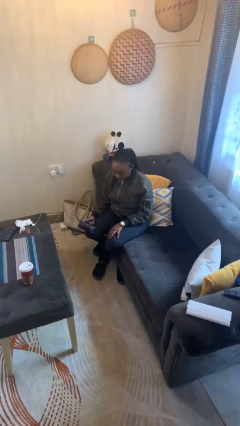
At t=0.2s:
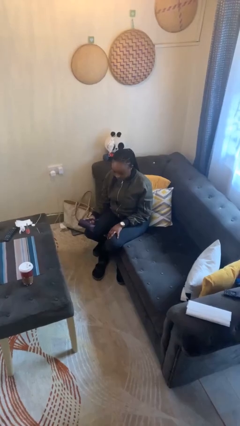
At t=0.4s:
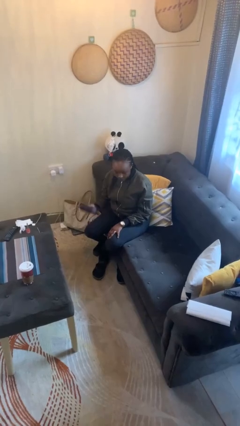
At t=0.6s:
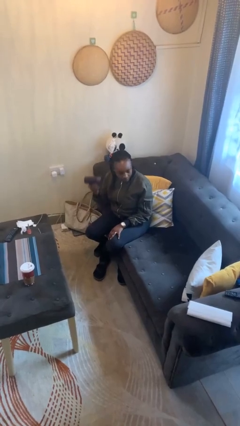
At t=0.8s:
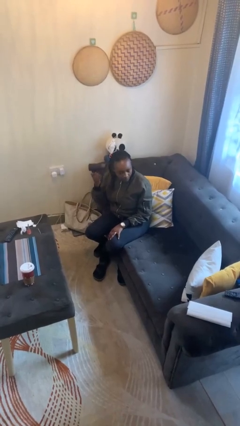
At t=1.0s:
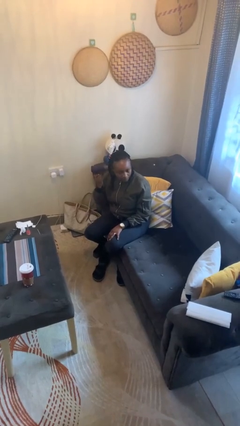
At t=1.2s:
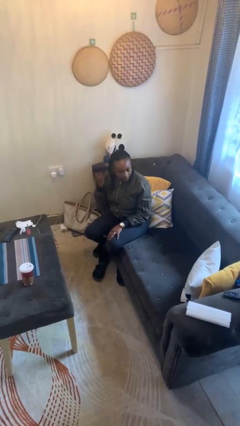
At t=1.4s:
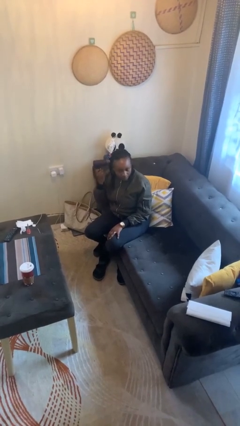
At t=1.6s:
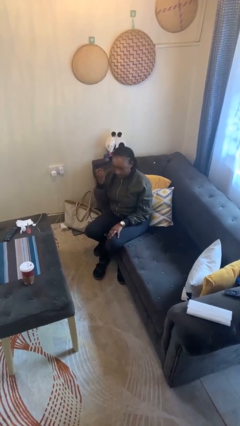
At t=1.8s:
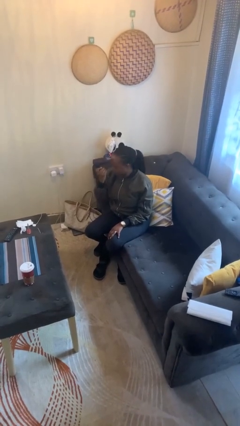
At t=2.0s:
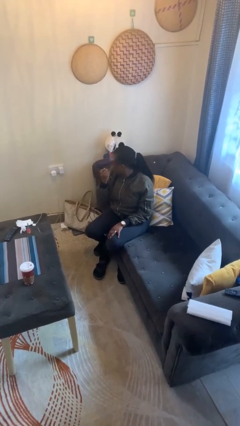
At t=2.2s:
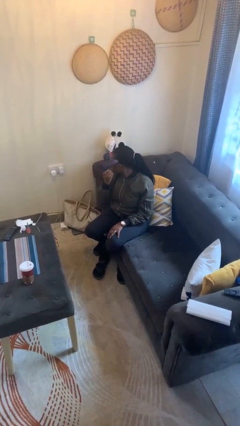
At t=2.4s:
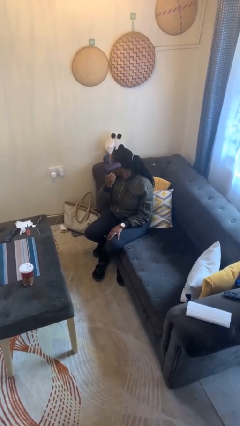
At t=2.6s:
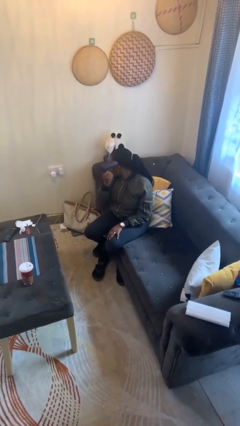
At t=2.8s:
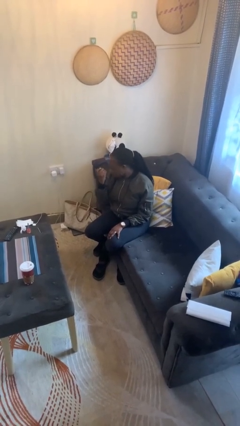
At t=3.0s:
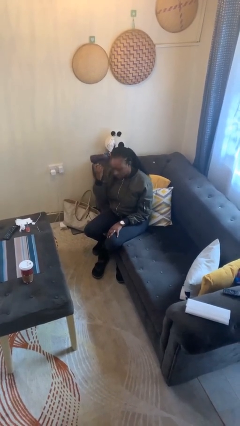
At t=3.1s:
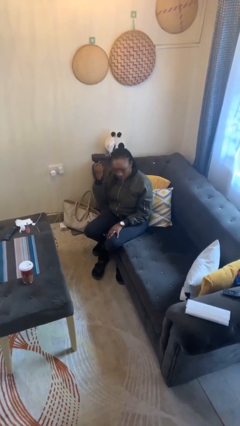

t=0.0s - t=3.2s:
person dries hair with hairdryer

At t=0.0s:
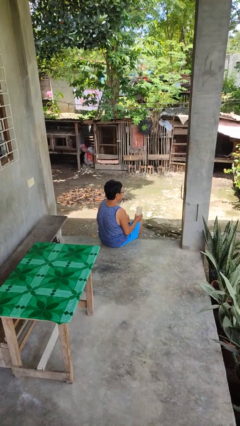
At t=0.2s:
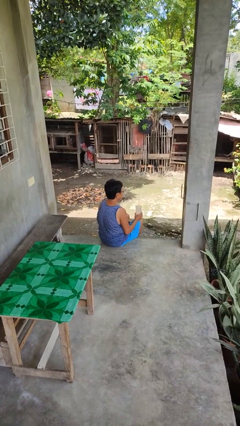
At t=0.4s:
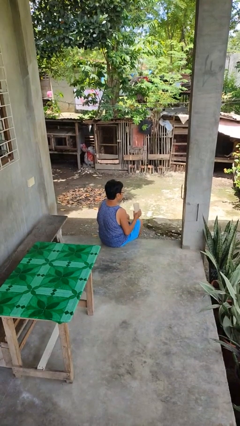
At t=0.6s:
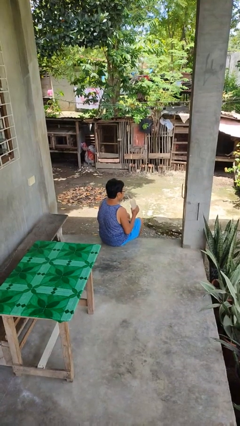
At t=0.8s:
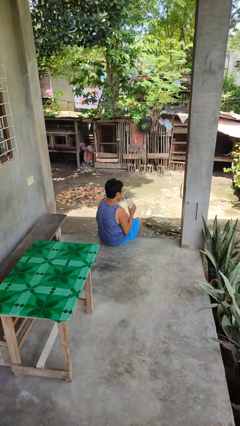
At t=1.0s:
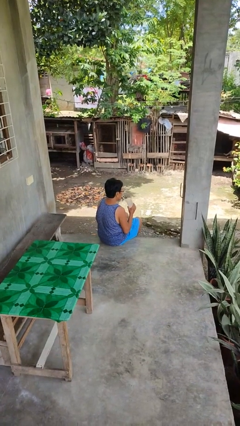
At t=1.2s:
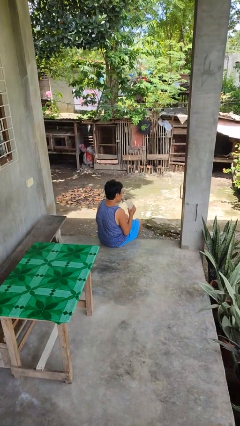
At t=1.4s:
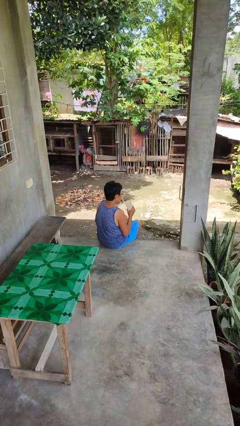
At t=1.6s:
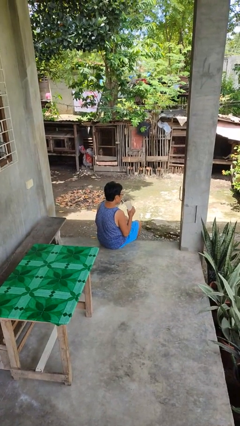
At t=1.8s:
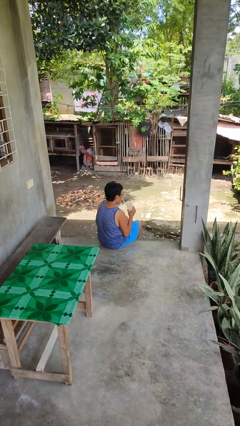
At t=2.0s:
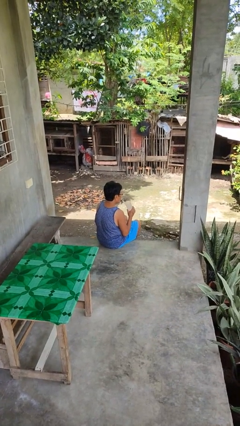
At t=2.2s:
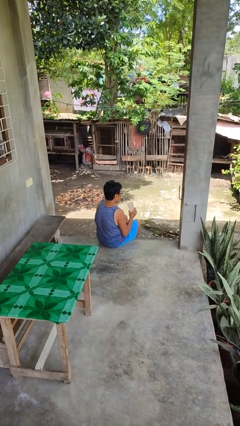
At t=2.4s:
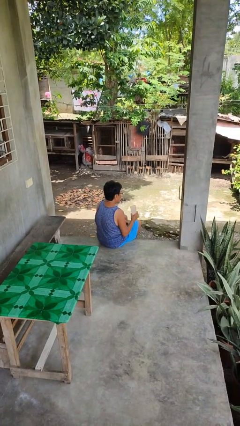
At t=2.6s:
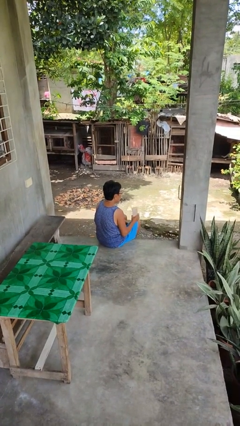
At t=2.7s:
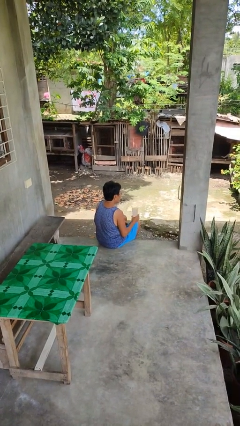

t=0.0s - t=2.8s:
person drinks from straw

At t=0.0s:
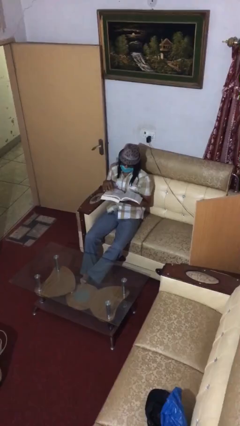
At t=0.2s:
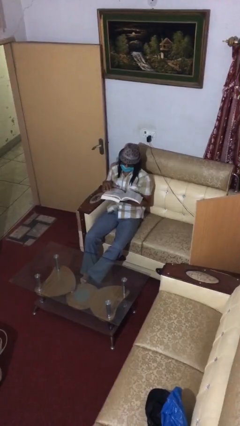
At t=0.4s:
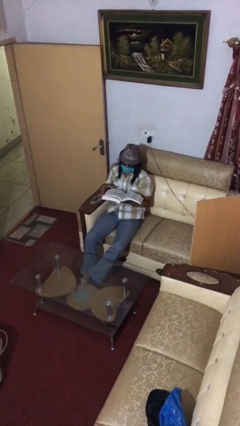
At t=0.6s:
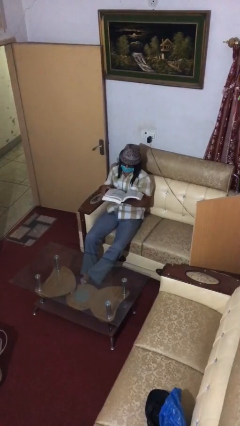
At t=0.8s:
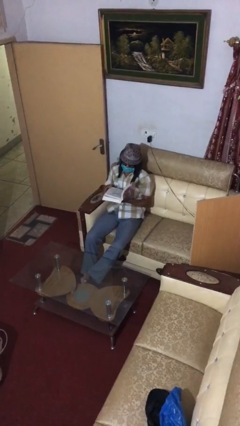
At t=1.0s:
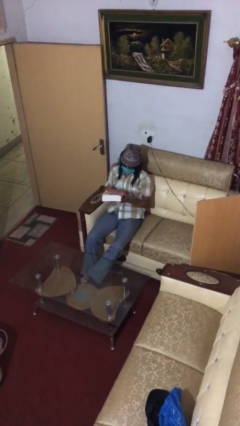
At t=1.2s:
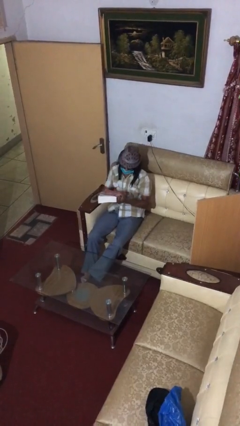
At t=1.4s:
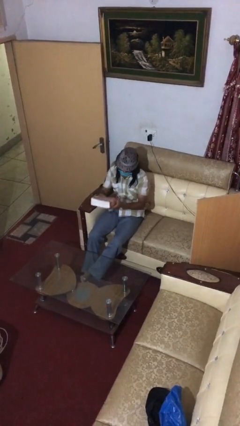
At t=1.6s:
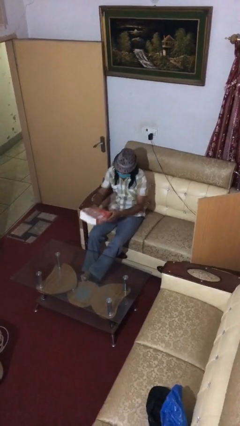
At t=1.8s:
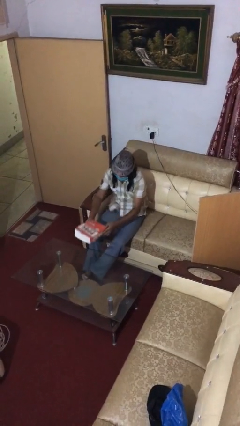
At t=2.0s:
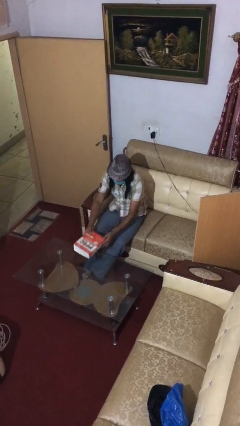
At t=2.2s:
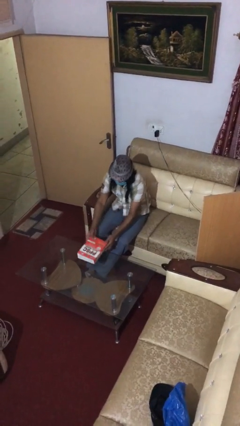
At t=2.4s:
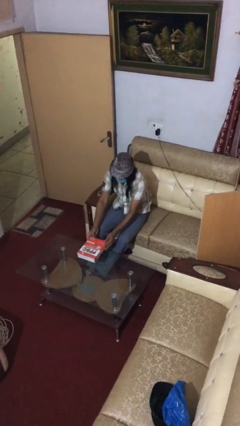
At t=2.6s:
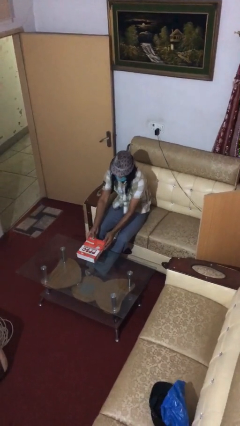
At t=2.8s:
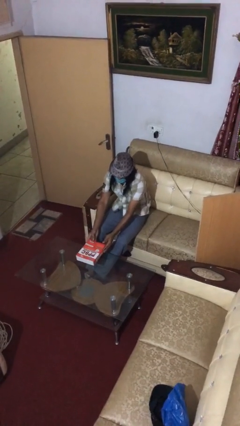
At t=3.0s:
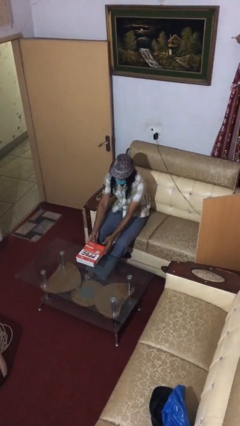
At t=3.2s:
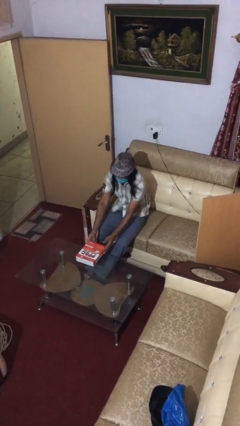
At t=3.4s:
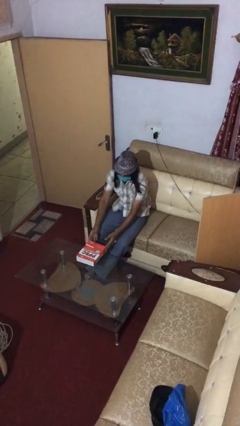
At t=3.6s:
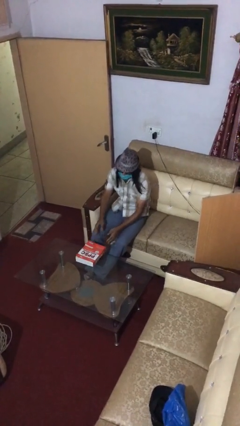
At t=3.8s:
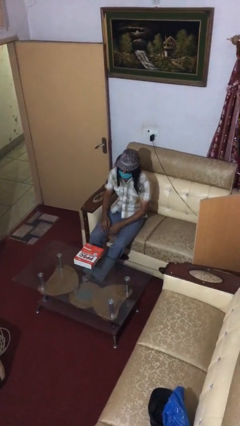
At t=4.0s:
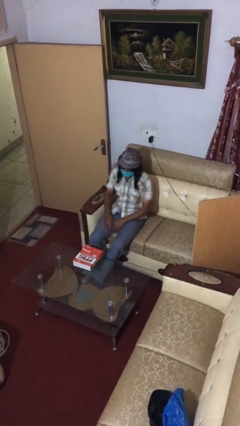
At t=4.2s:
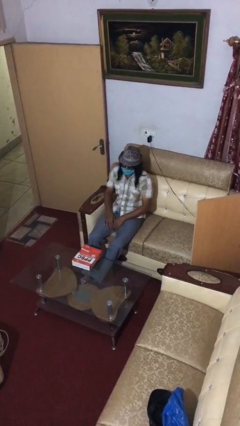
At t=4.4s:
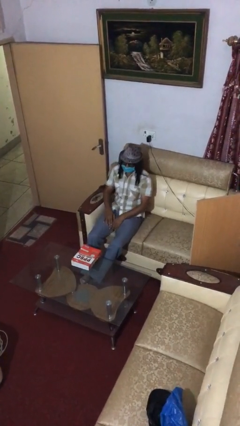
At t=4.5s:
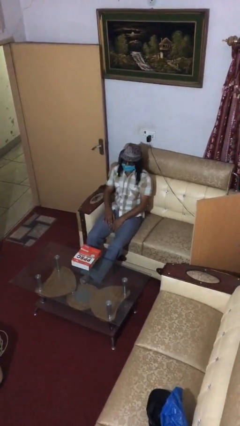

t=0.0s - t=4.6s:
person puts down object on table

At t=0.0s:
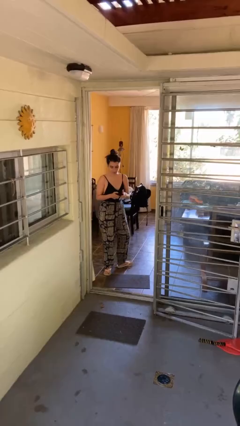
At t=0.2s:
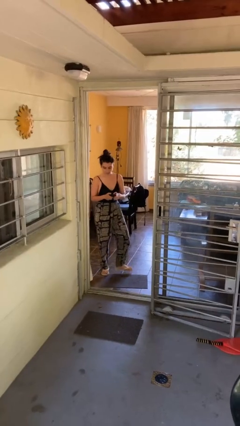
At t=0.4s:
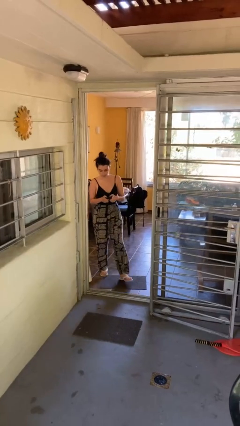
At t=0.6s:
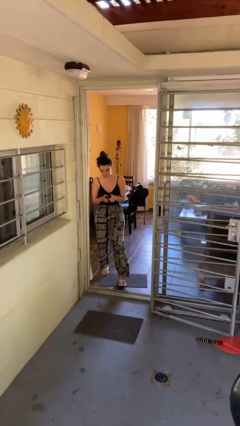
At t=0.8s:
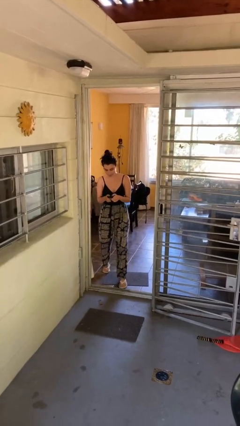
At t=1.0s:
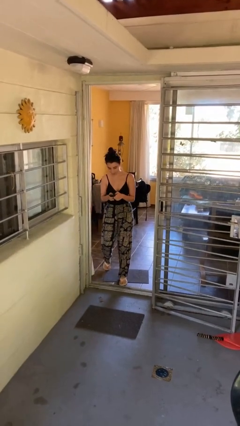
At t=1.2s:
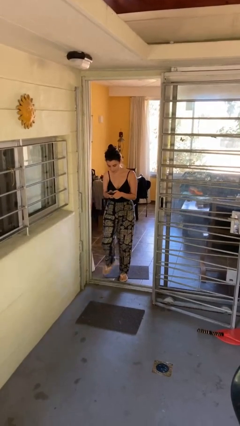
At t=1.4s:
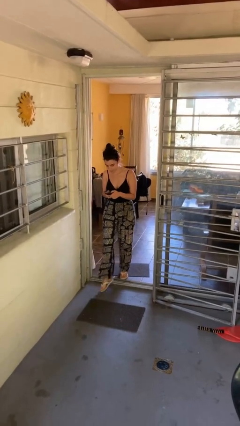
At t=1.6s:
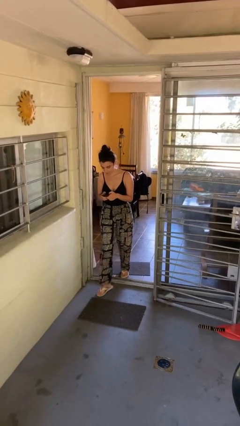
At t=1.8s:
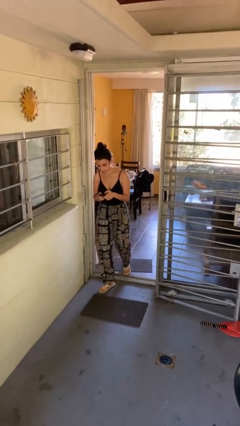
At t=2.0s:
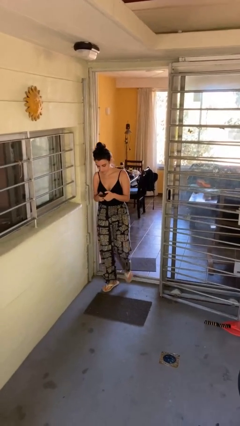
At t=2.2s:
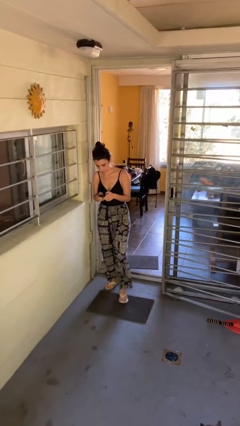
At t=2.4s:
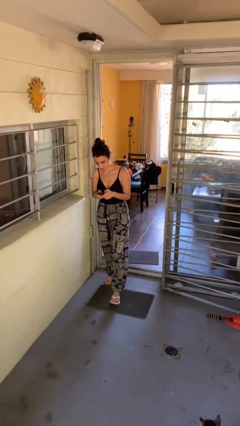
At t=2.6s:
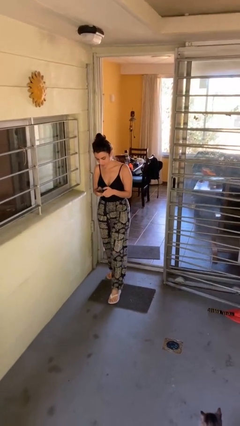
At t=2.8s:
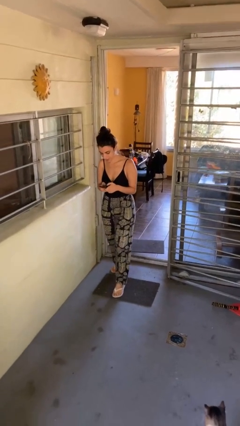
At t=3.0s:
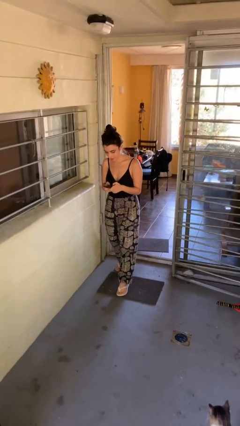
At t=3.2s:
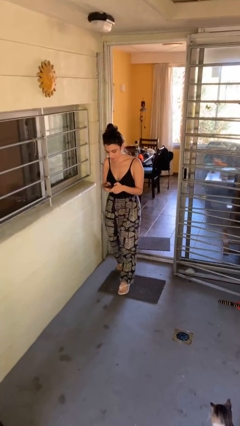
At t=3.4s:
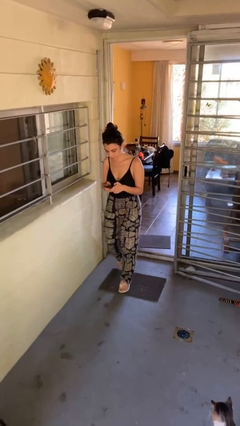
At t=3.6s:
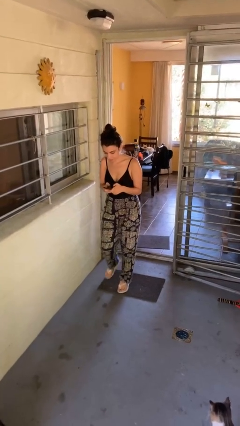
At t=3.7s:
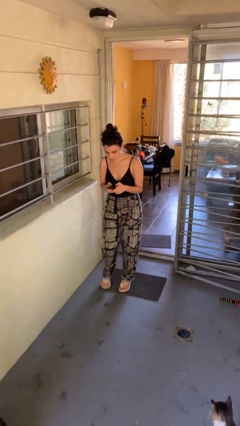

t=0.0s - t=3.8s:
person enters scene through structure

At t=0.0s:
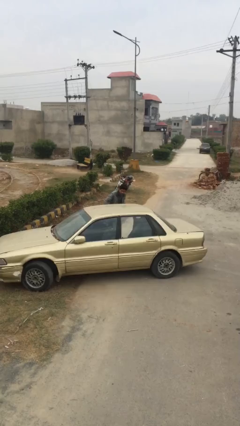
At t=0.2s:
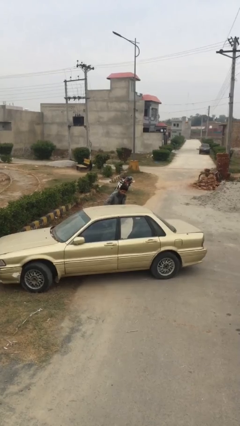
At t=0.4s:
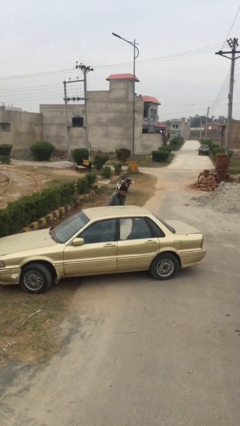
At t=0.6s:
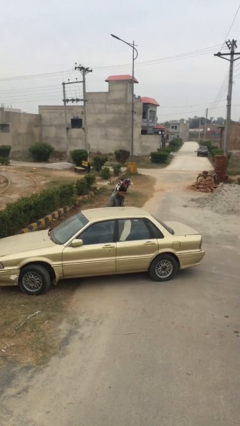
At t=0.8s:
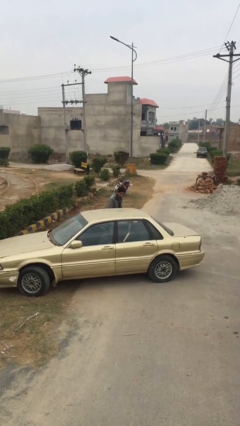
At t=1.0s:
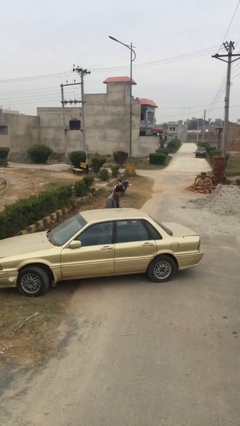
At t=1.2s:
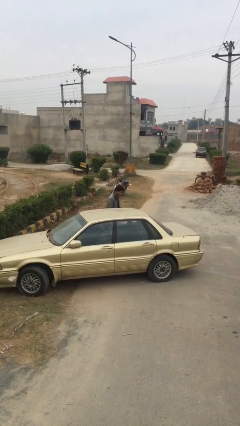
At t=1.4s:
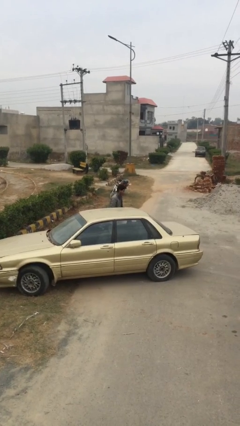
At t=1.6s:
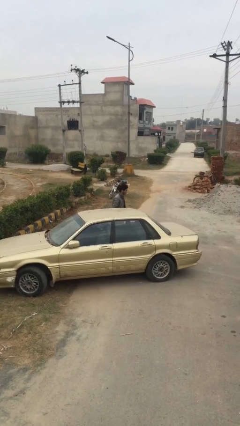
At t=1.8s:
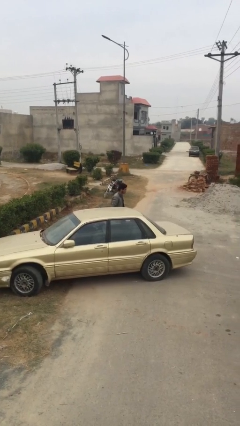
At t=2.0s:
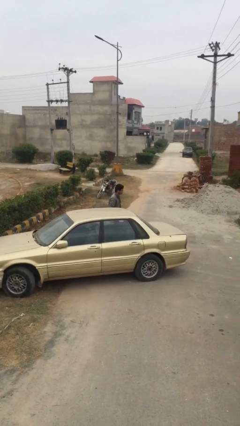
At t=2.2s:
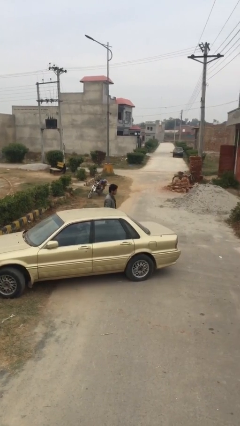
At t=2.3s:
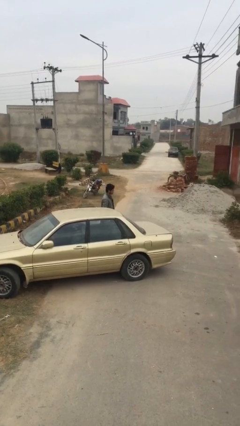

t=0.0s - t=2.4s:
person closes car door

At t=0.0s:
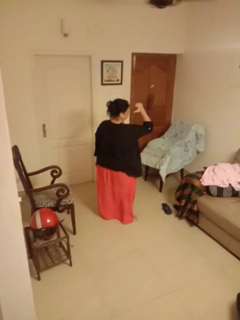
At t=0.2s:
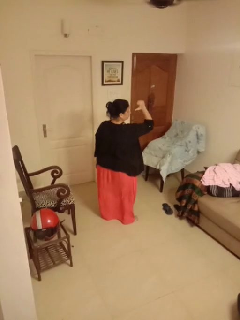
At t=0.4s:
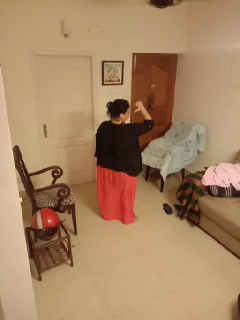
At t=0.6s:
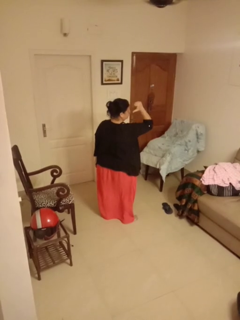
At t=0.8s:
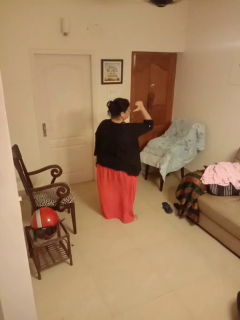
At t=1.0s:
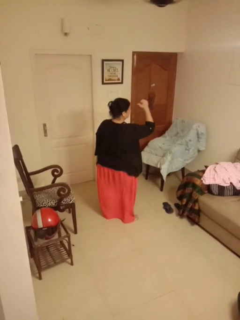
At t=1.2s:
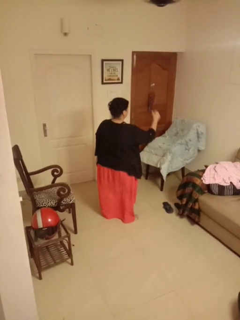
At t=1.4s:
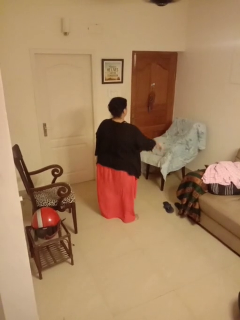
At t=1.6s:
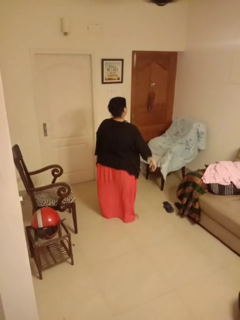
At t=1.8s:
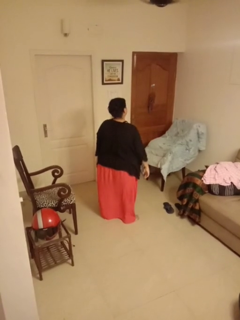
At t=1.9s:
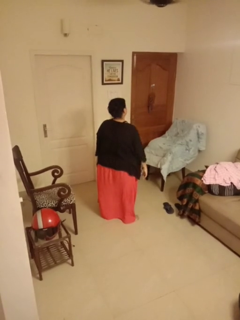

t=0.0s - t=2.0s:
person gestures behind me
